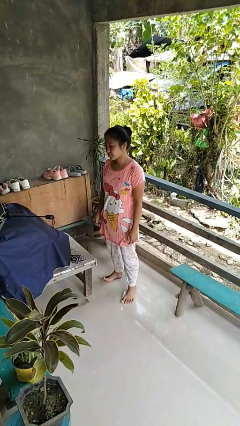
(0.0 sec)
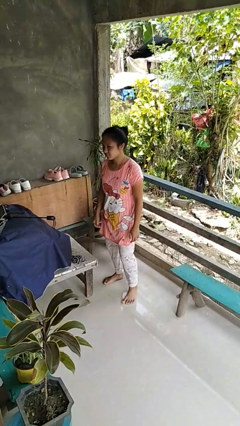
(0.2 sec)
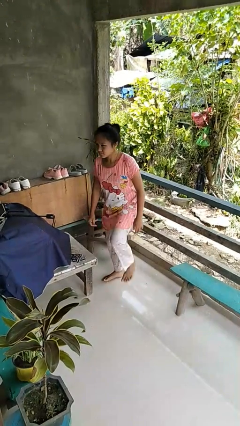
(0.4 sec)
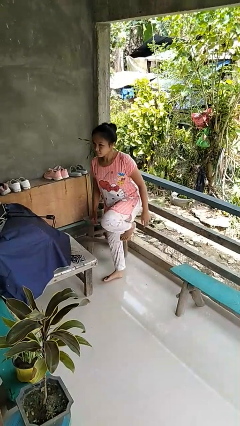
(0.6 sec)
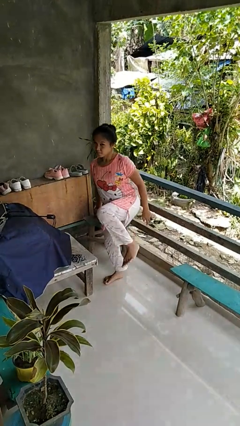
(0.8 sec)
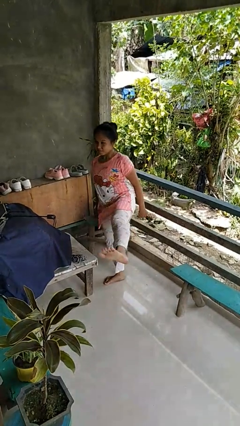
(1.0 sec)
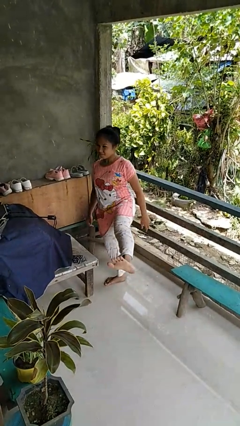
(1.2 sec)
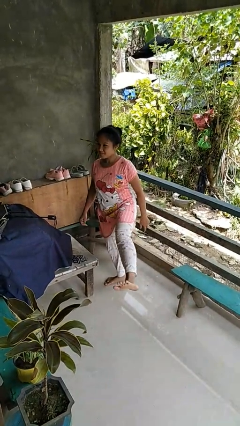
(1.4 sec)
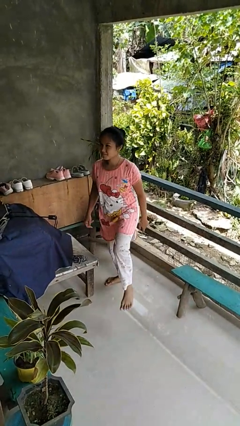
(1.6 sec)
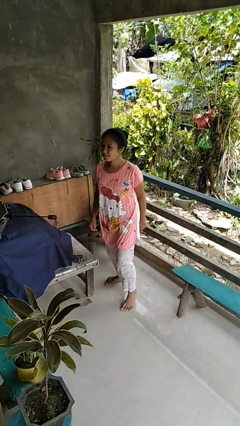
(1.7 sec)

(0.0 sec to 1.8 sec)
person karate kicks

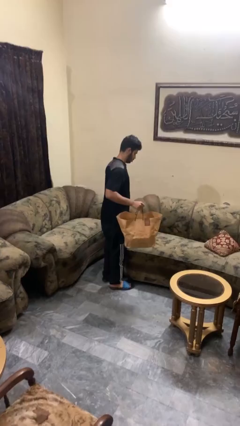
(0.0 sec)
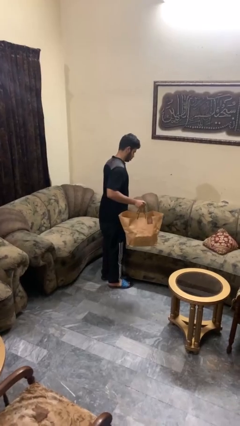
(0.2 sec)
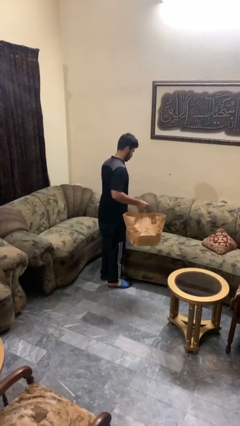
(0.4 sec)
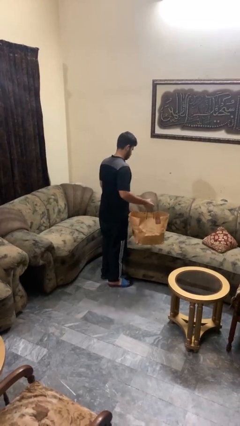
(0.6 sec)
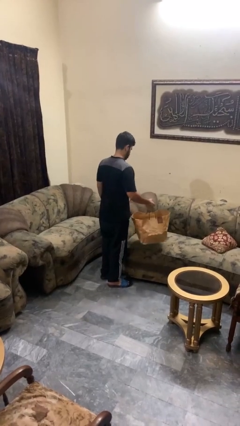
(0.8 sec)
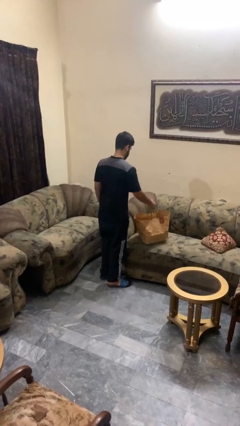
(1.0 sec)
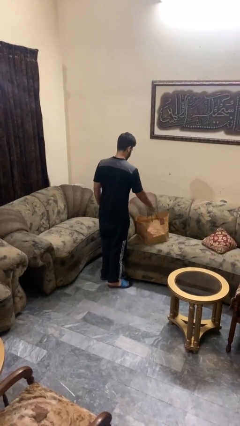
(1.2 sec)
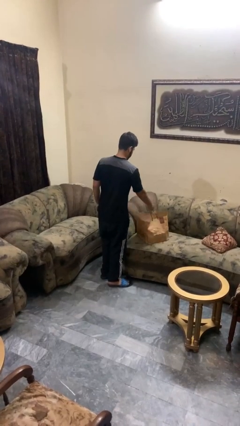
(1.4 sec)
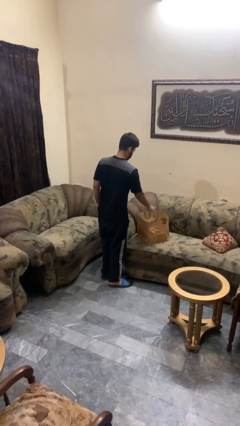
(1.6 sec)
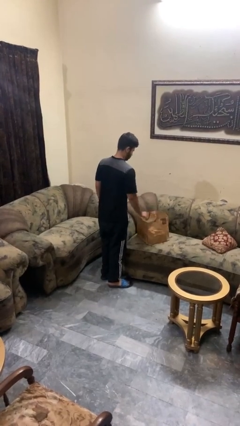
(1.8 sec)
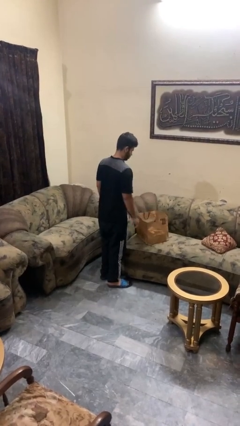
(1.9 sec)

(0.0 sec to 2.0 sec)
person puts down object on couch

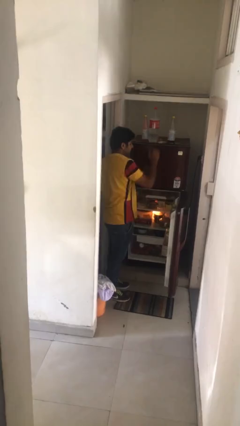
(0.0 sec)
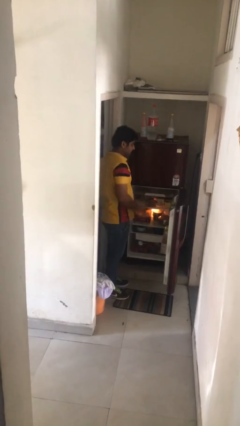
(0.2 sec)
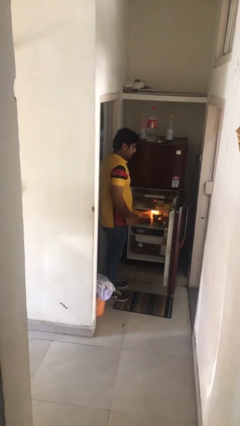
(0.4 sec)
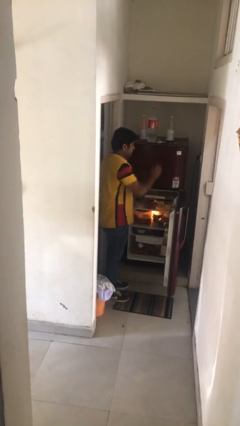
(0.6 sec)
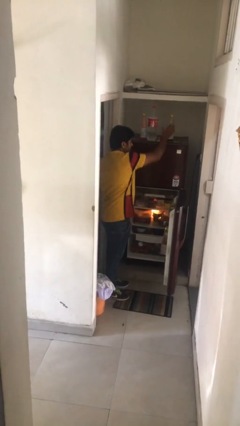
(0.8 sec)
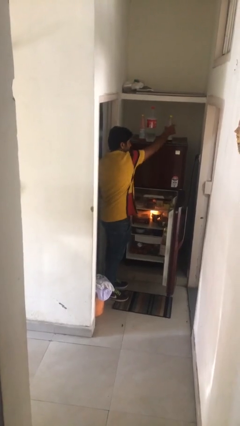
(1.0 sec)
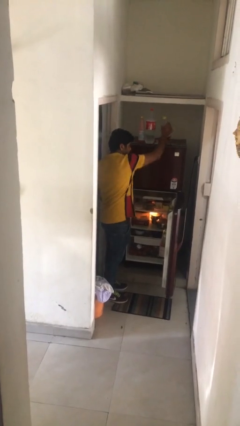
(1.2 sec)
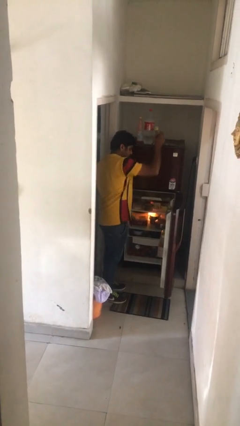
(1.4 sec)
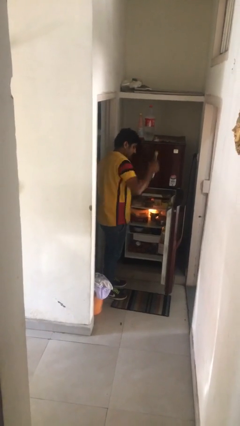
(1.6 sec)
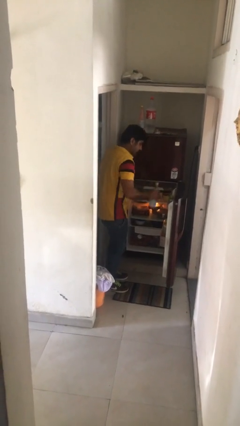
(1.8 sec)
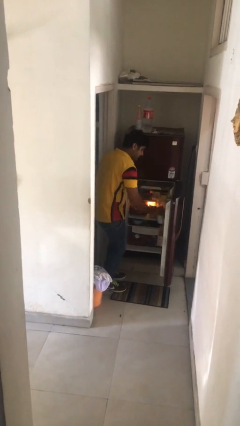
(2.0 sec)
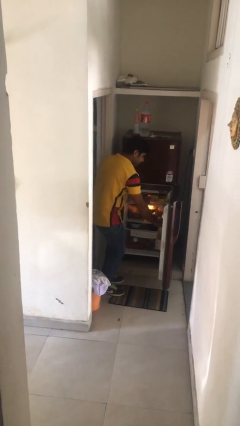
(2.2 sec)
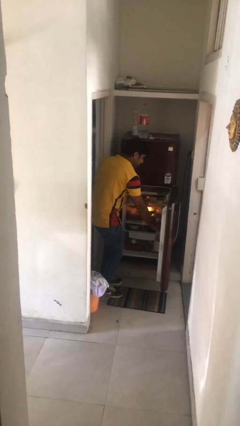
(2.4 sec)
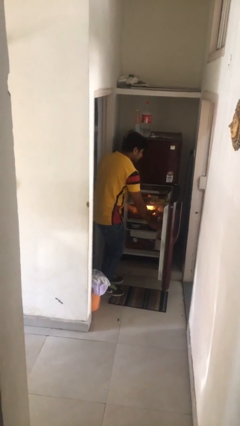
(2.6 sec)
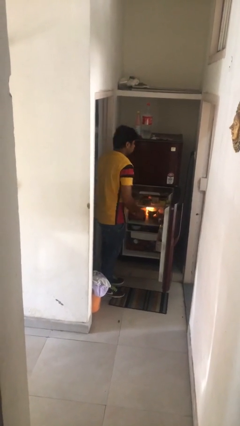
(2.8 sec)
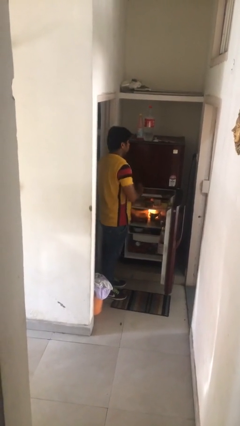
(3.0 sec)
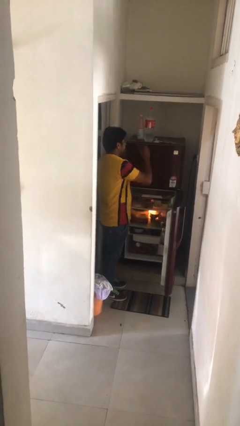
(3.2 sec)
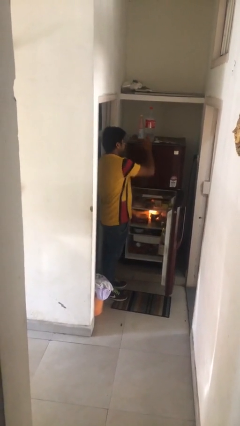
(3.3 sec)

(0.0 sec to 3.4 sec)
person loads groceries into refrigerator

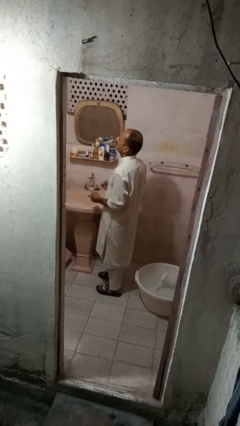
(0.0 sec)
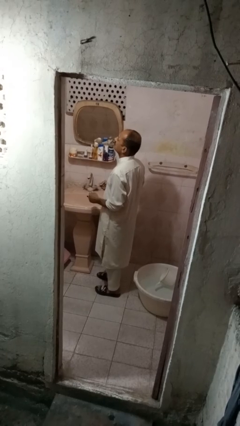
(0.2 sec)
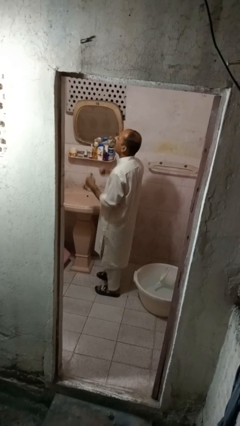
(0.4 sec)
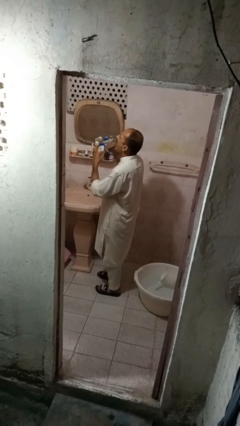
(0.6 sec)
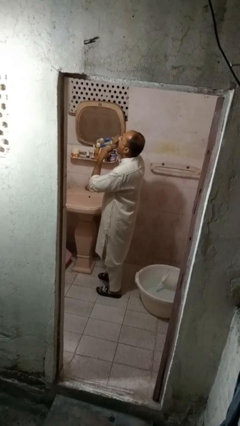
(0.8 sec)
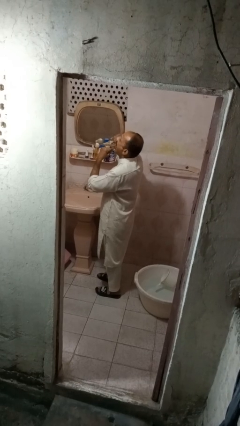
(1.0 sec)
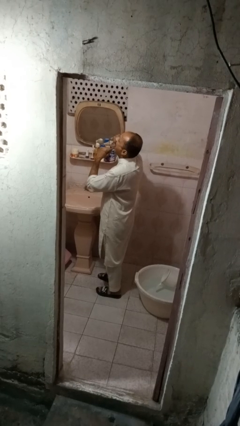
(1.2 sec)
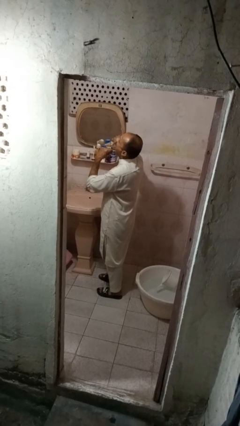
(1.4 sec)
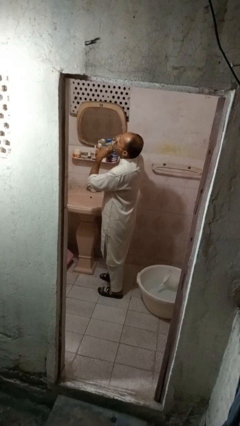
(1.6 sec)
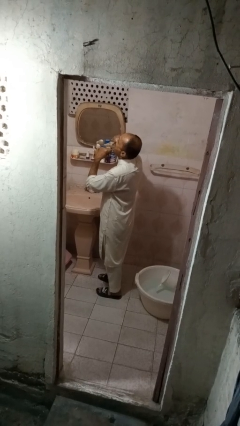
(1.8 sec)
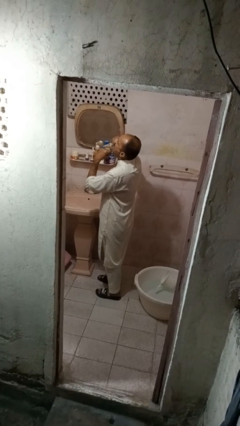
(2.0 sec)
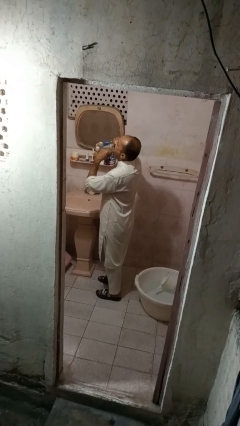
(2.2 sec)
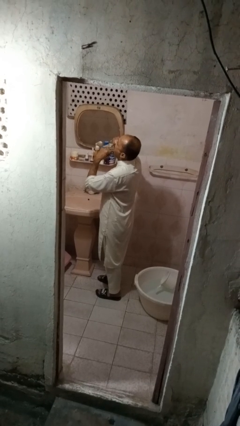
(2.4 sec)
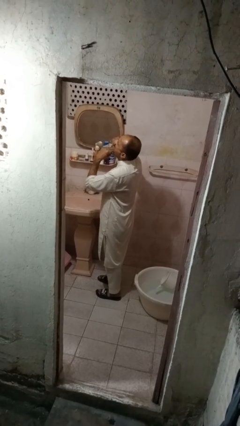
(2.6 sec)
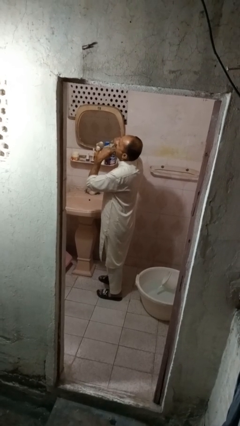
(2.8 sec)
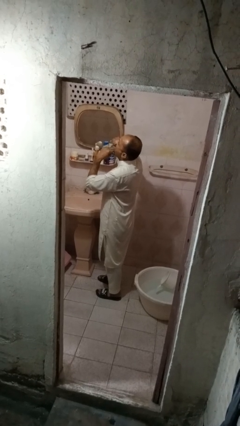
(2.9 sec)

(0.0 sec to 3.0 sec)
person flosses

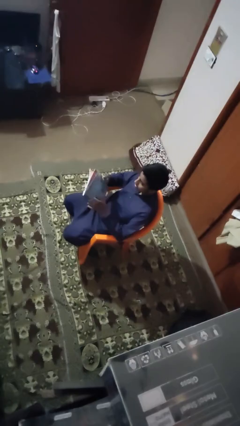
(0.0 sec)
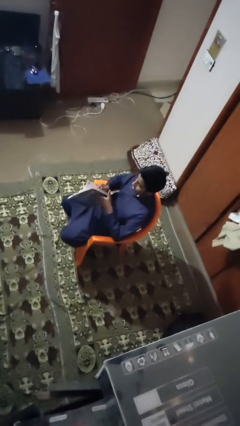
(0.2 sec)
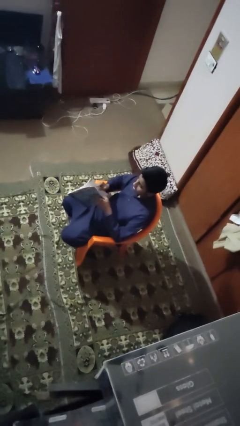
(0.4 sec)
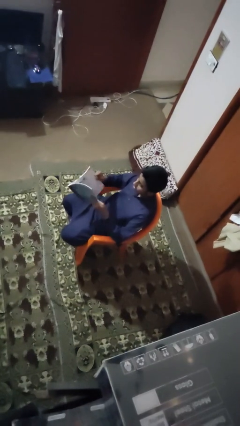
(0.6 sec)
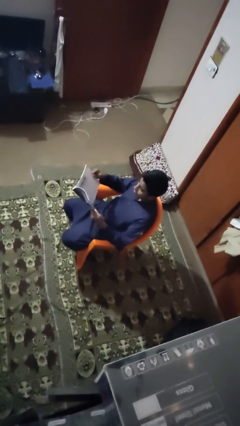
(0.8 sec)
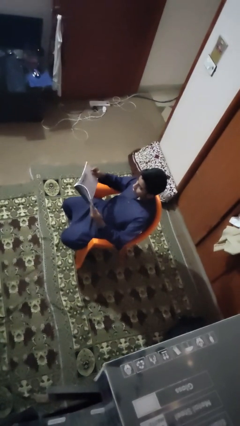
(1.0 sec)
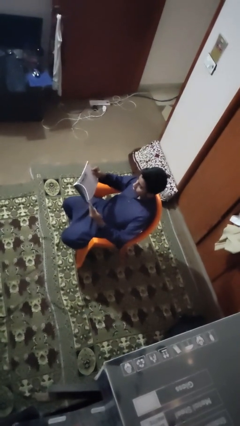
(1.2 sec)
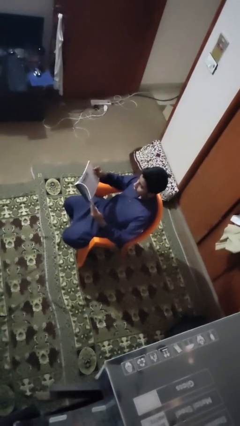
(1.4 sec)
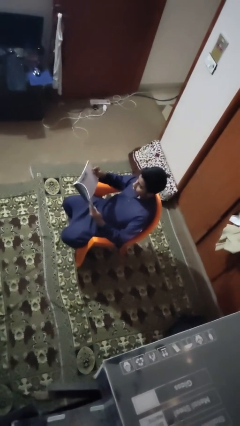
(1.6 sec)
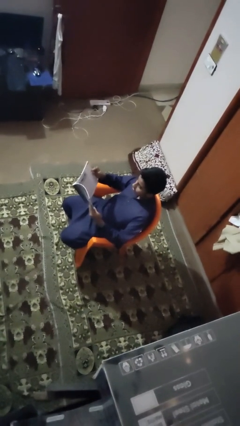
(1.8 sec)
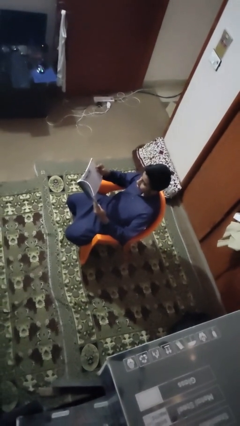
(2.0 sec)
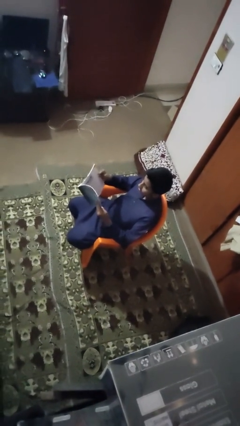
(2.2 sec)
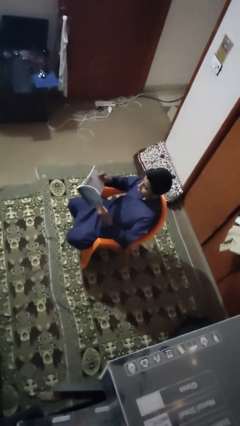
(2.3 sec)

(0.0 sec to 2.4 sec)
person reads book

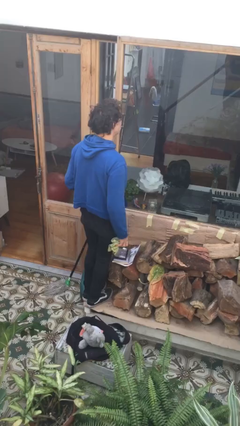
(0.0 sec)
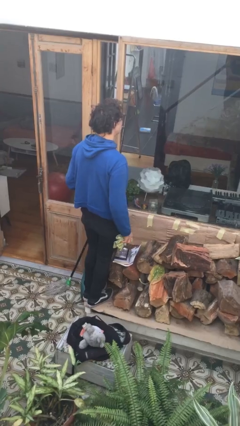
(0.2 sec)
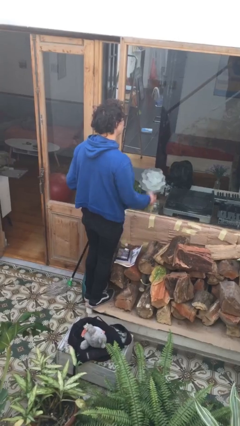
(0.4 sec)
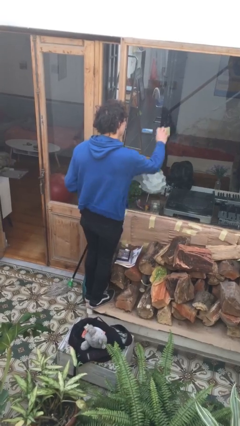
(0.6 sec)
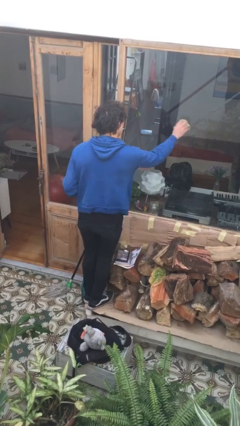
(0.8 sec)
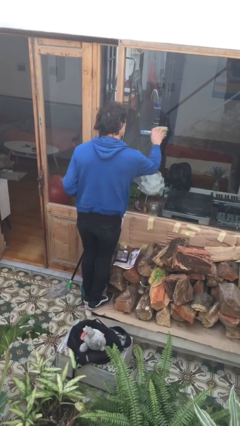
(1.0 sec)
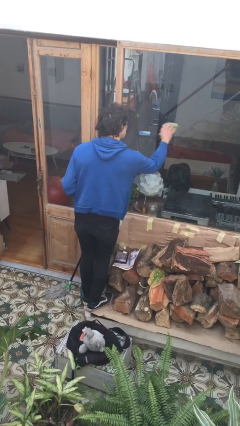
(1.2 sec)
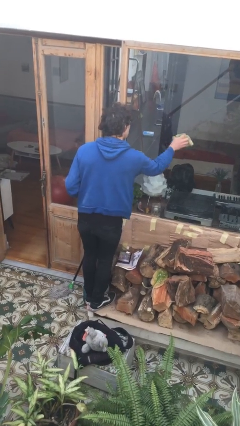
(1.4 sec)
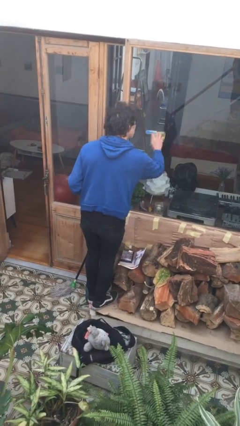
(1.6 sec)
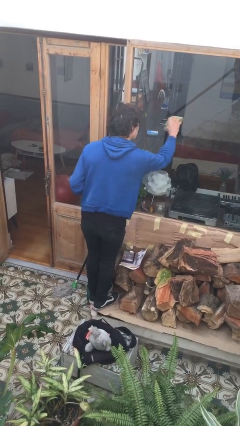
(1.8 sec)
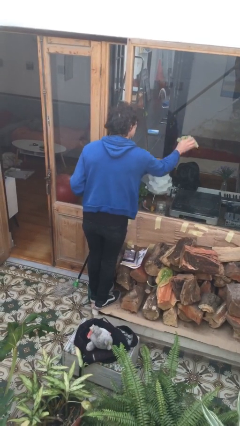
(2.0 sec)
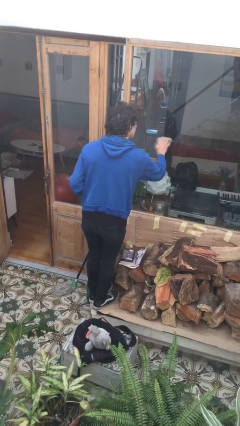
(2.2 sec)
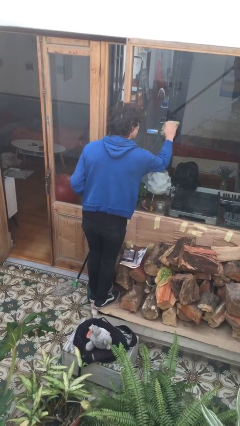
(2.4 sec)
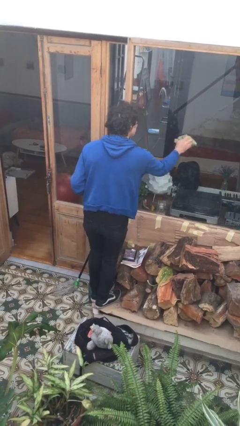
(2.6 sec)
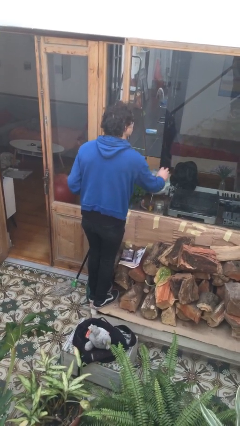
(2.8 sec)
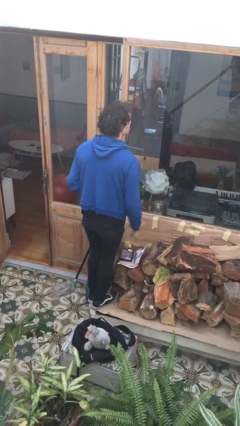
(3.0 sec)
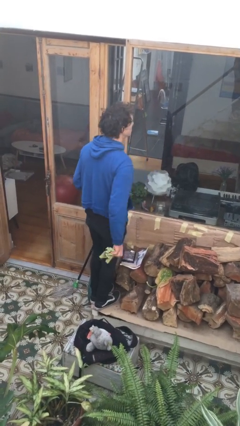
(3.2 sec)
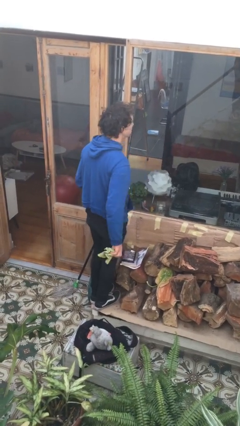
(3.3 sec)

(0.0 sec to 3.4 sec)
person washes window

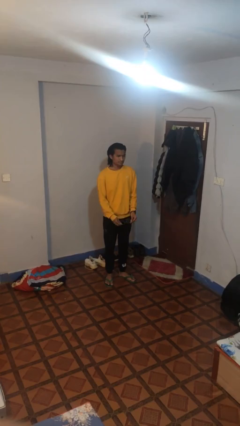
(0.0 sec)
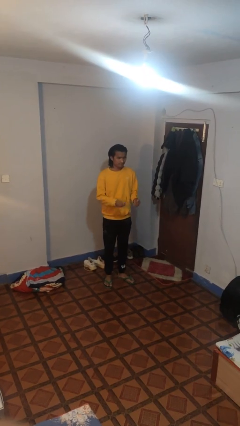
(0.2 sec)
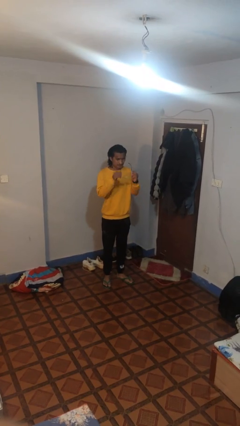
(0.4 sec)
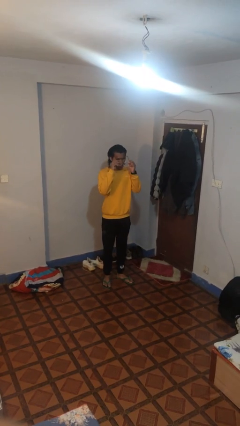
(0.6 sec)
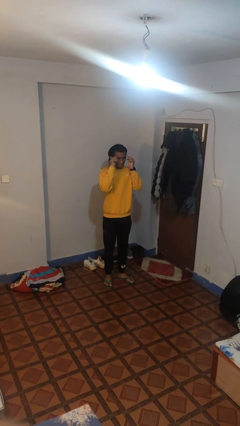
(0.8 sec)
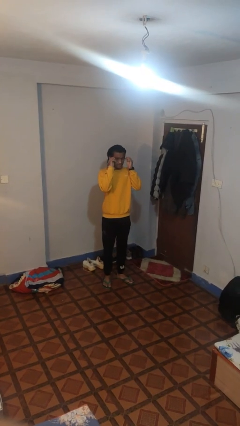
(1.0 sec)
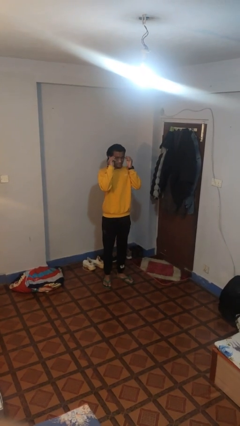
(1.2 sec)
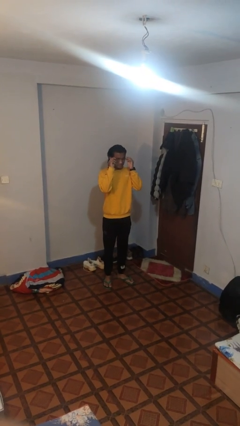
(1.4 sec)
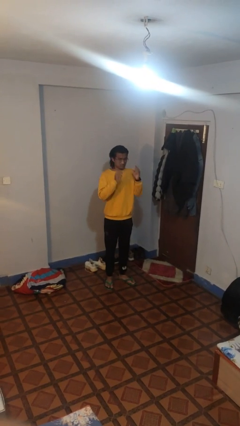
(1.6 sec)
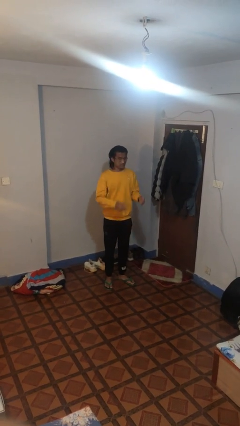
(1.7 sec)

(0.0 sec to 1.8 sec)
person puts on glasses
